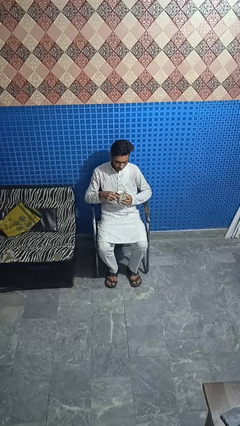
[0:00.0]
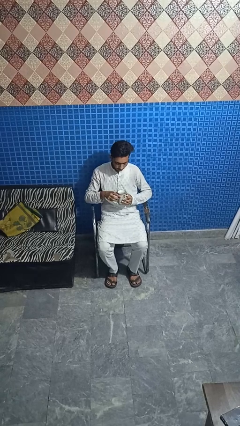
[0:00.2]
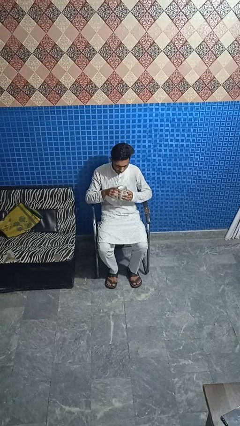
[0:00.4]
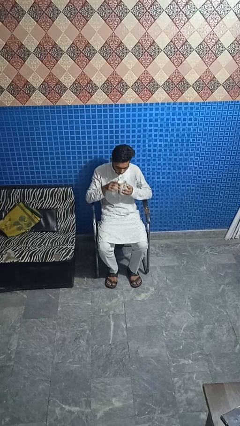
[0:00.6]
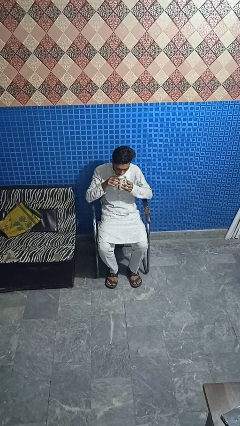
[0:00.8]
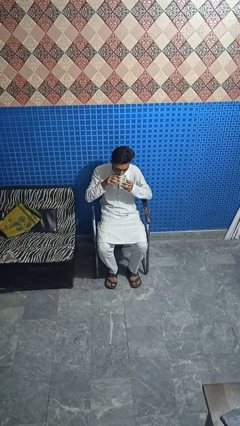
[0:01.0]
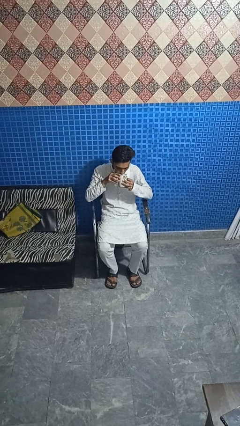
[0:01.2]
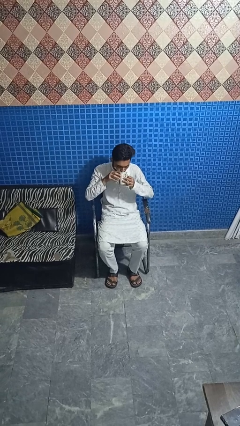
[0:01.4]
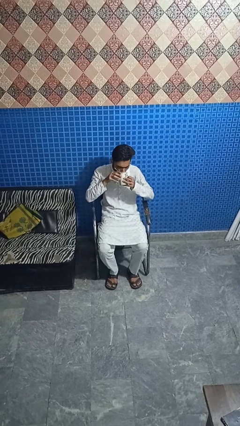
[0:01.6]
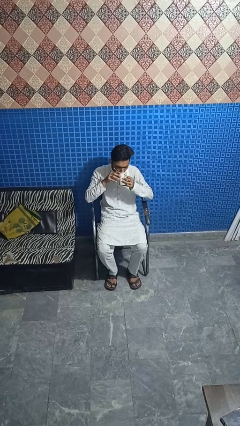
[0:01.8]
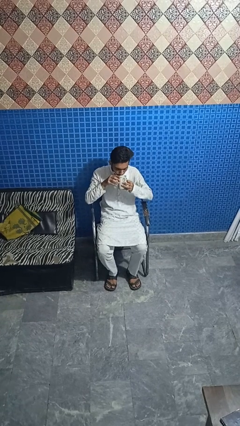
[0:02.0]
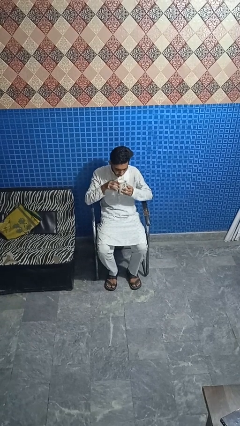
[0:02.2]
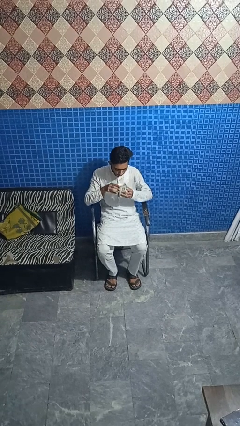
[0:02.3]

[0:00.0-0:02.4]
person drinks from mug

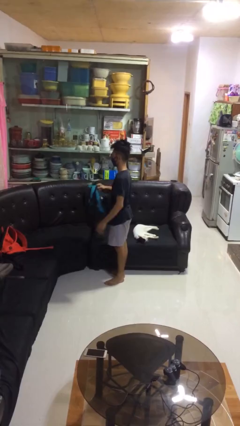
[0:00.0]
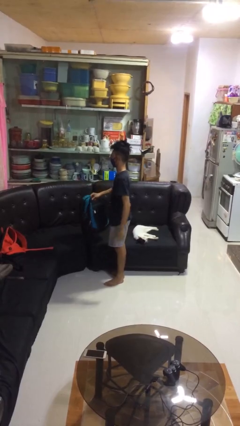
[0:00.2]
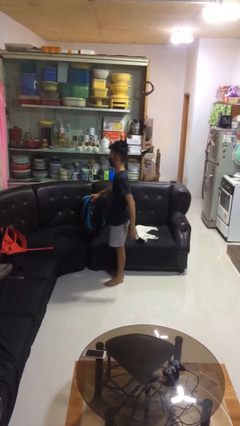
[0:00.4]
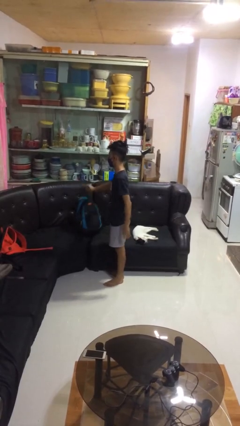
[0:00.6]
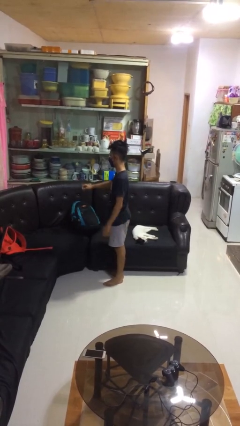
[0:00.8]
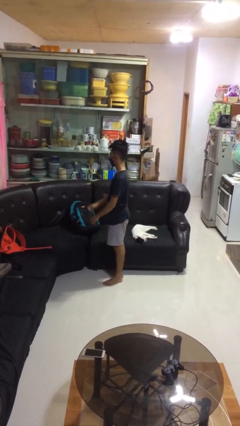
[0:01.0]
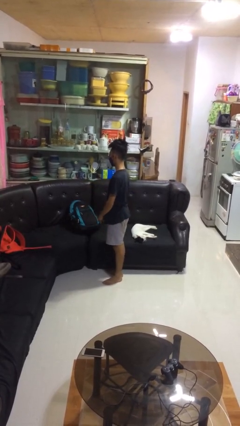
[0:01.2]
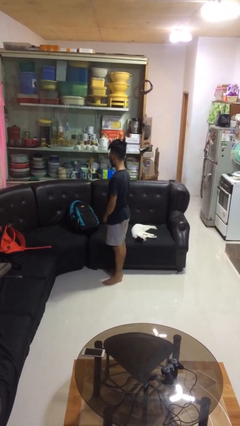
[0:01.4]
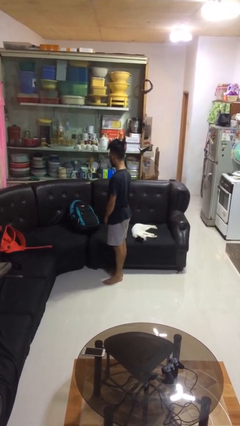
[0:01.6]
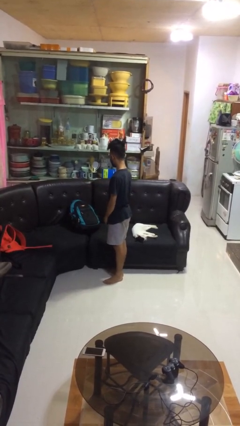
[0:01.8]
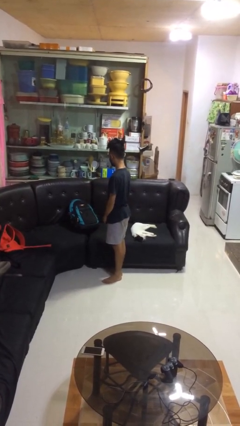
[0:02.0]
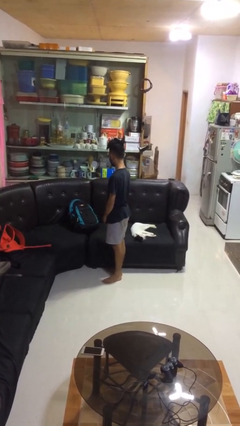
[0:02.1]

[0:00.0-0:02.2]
person puts down object on couch

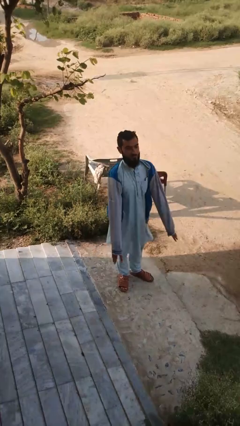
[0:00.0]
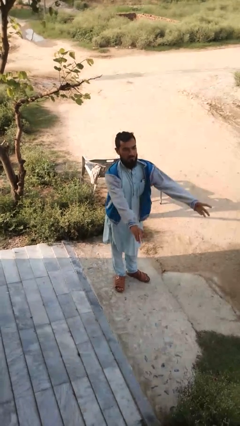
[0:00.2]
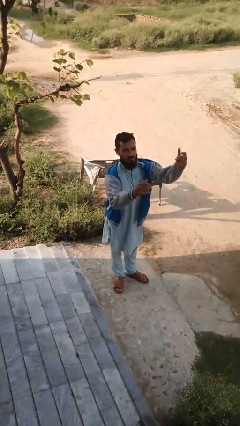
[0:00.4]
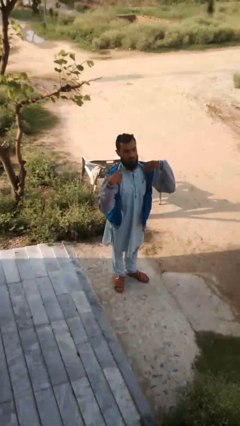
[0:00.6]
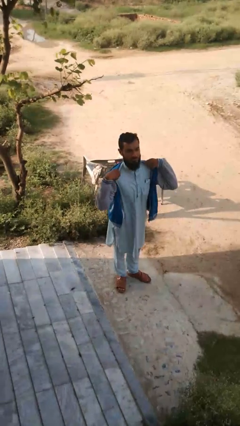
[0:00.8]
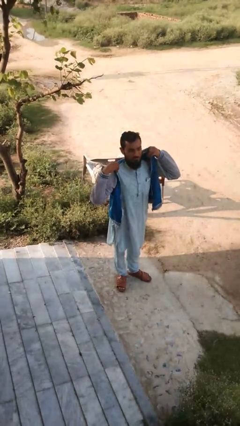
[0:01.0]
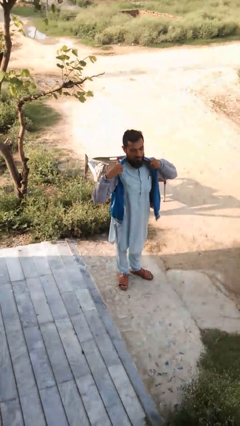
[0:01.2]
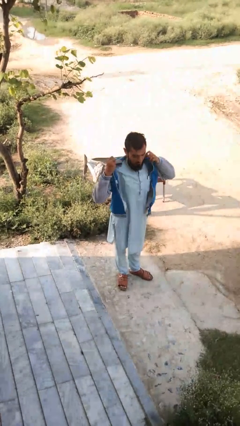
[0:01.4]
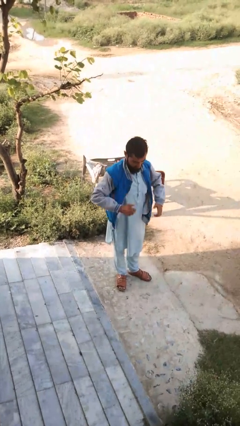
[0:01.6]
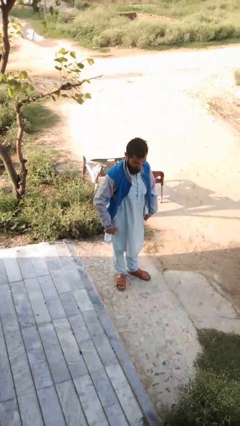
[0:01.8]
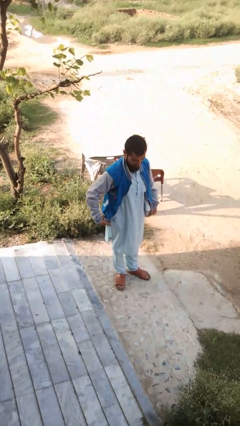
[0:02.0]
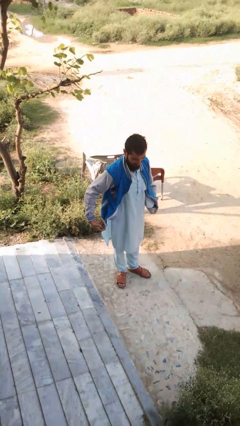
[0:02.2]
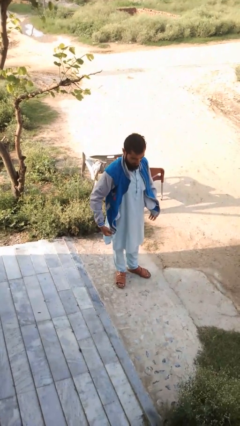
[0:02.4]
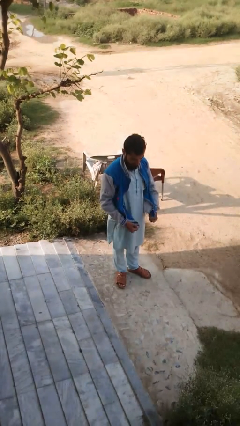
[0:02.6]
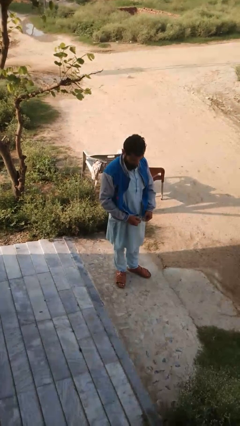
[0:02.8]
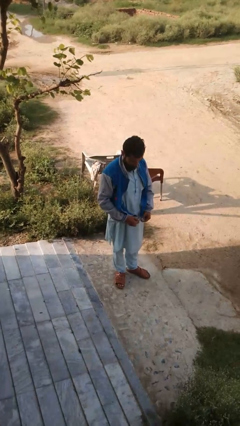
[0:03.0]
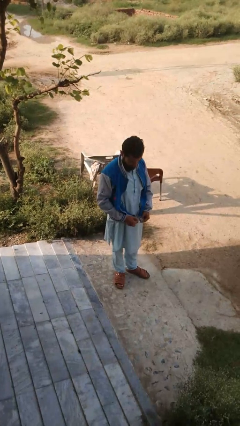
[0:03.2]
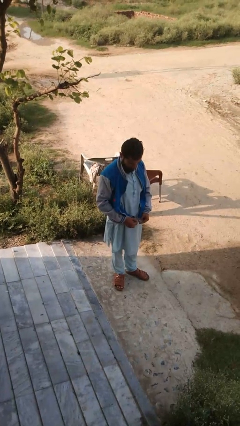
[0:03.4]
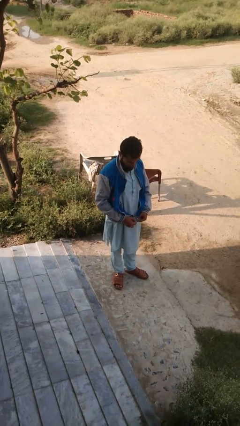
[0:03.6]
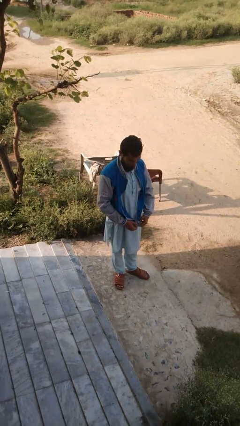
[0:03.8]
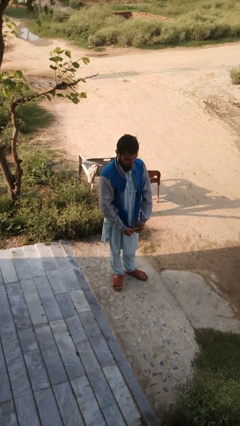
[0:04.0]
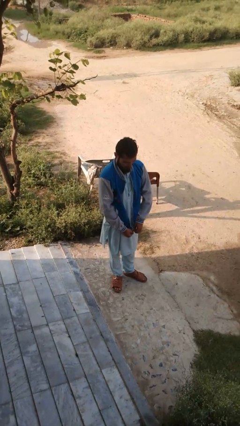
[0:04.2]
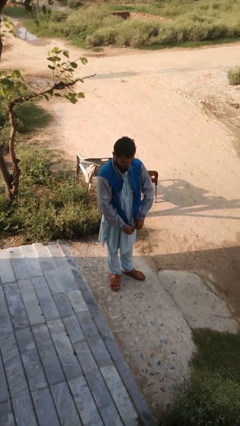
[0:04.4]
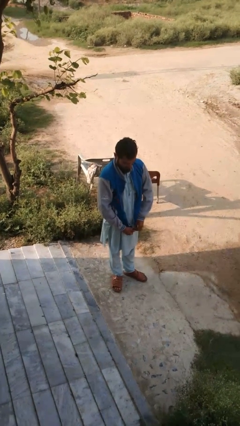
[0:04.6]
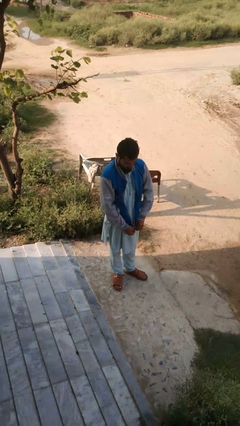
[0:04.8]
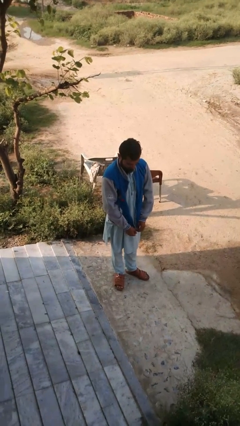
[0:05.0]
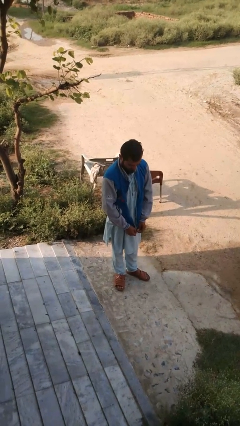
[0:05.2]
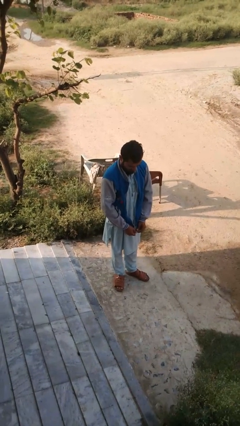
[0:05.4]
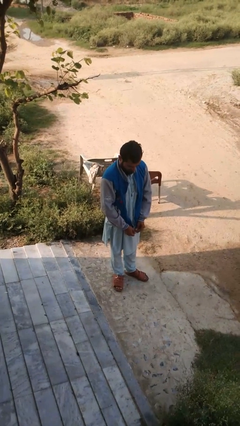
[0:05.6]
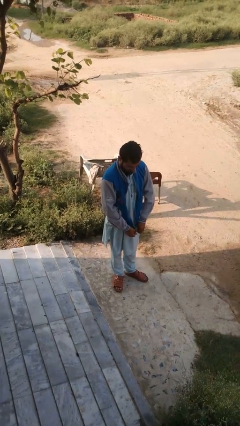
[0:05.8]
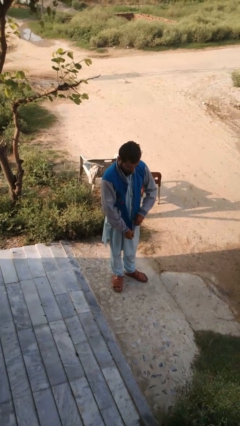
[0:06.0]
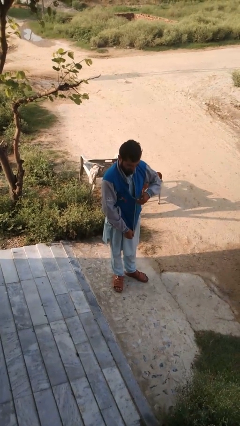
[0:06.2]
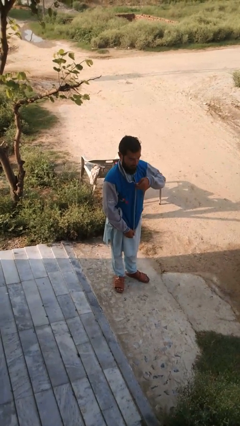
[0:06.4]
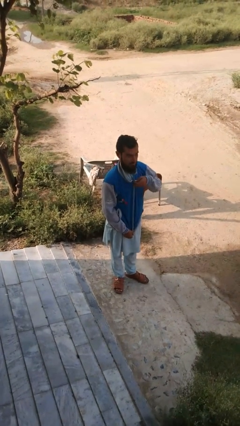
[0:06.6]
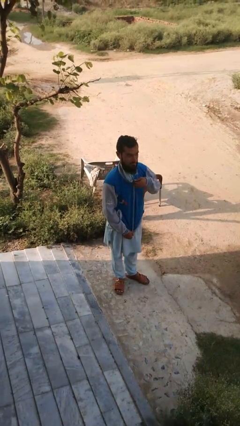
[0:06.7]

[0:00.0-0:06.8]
person zips up jacket

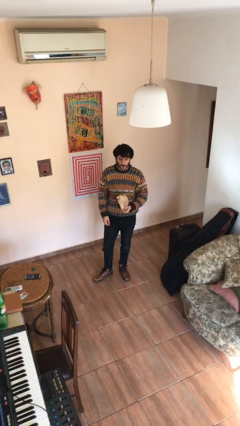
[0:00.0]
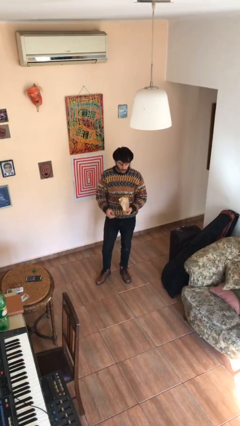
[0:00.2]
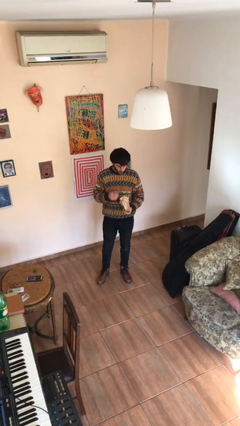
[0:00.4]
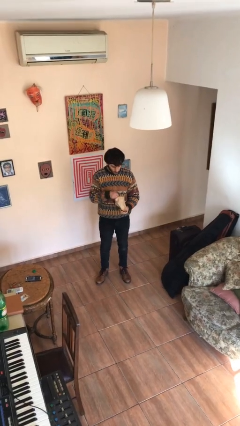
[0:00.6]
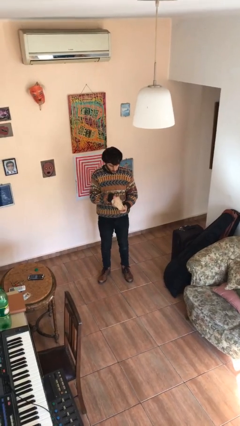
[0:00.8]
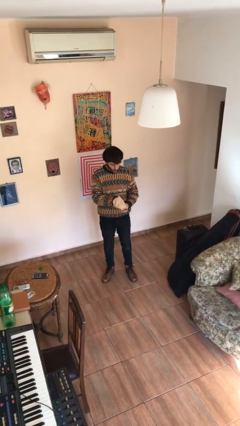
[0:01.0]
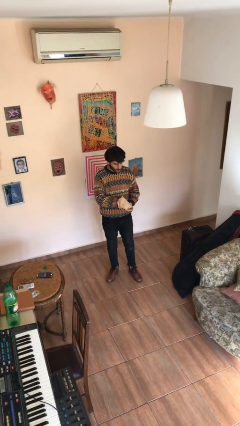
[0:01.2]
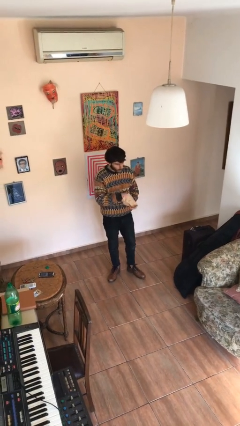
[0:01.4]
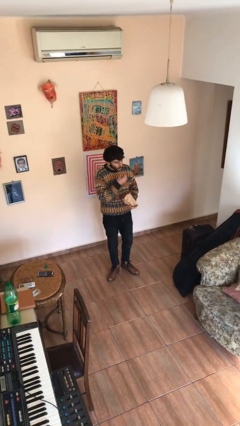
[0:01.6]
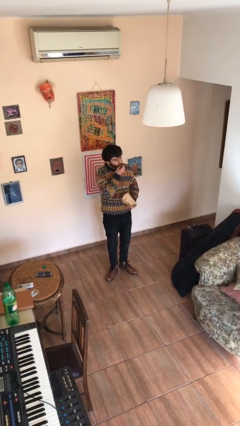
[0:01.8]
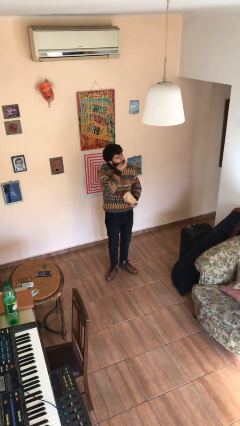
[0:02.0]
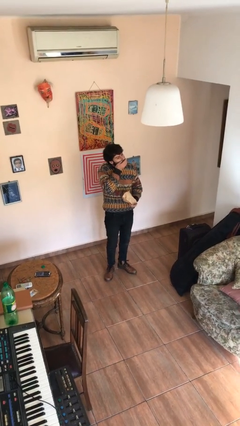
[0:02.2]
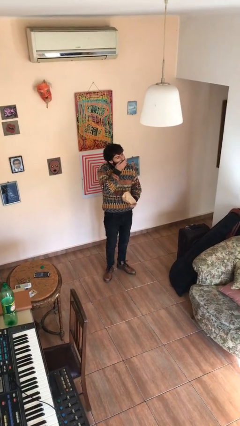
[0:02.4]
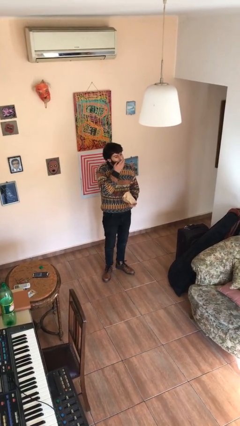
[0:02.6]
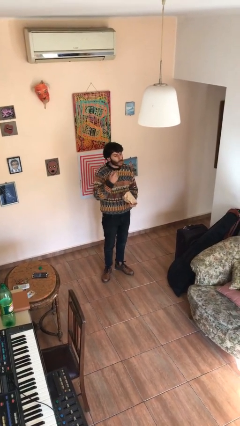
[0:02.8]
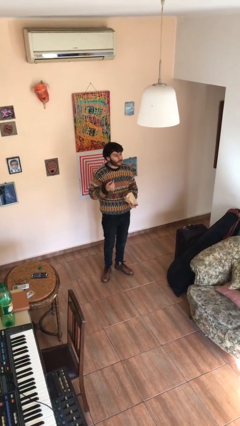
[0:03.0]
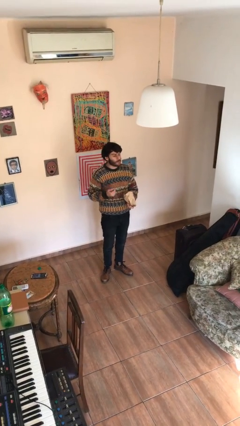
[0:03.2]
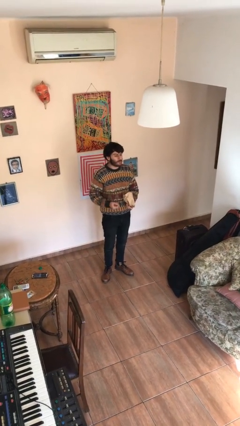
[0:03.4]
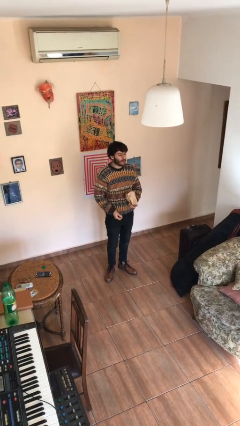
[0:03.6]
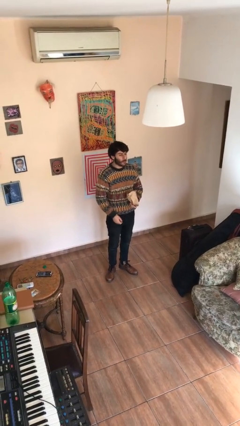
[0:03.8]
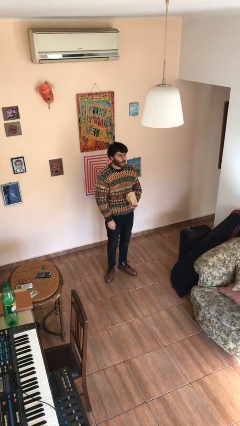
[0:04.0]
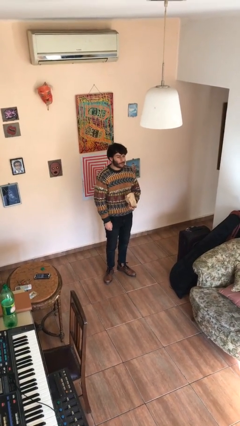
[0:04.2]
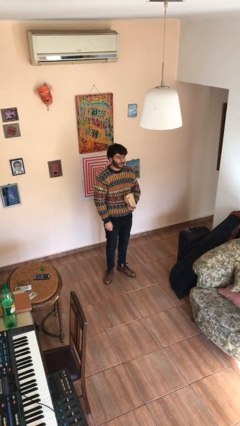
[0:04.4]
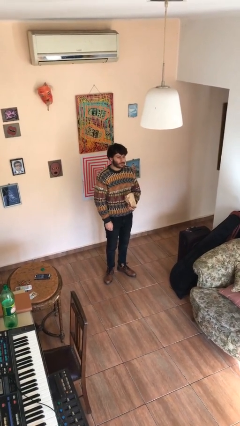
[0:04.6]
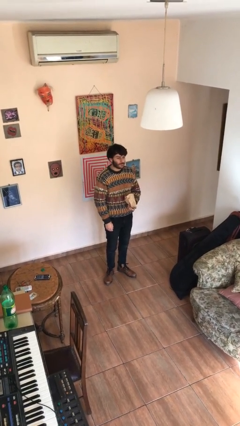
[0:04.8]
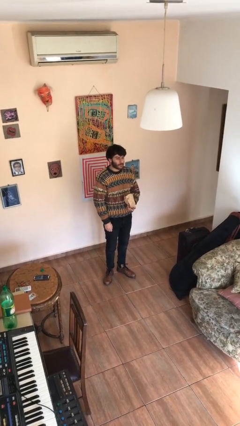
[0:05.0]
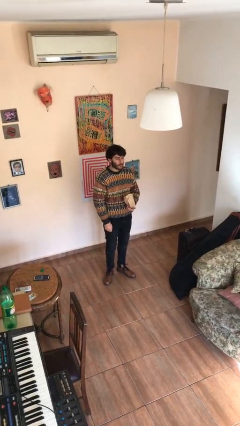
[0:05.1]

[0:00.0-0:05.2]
person eats snack from bag

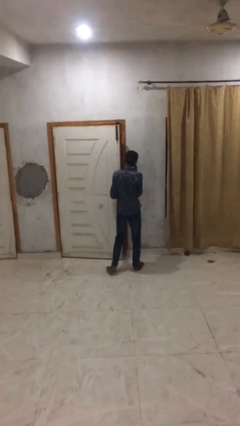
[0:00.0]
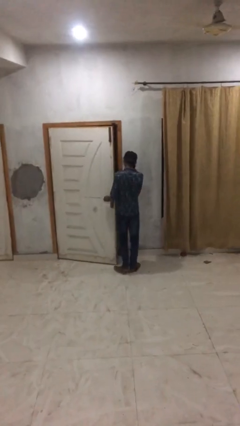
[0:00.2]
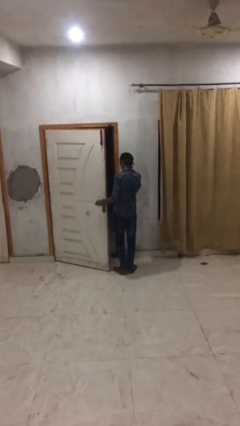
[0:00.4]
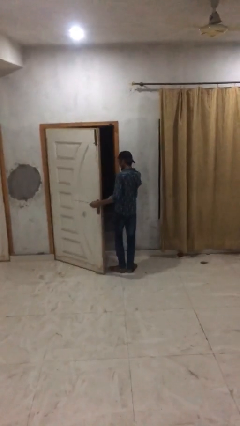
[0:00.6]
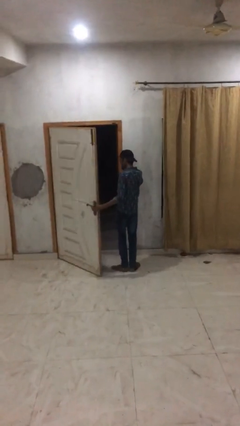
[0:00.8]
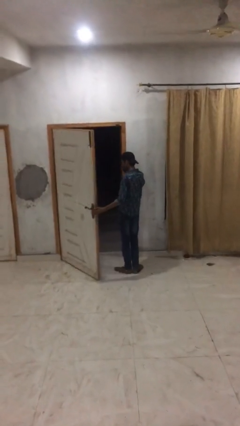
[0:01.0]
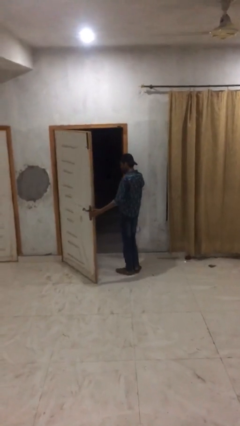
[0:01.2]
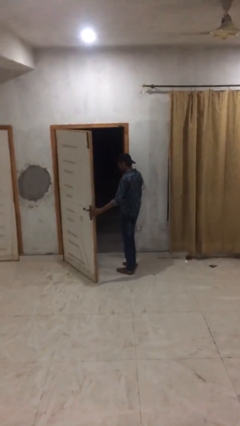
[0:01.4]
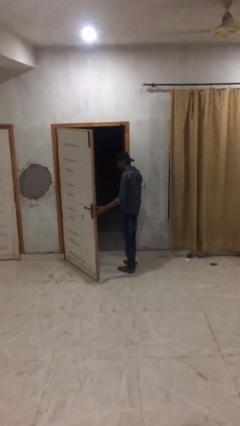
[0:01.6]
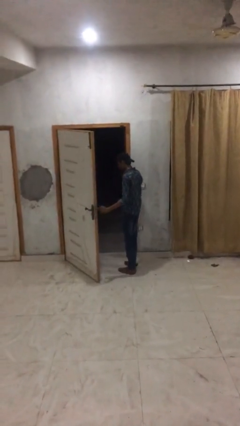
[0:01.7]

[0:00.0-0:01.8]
person opens facility door
